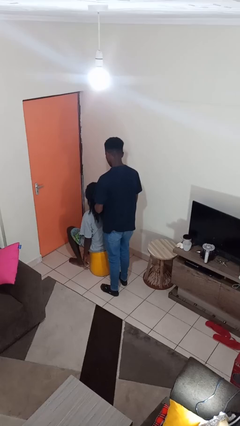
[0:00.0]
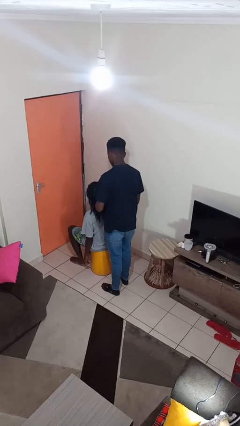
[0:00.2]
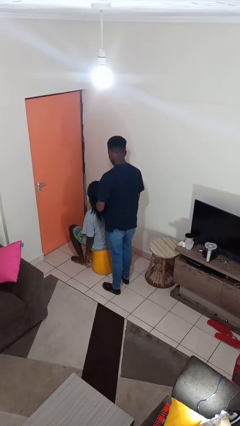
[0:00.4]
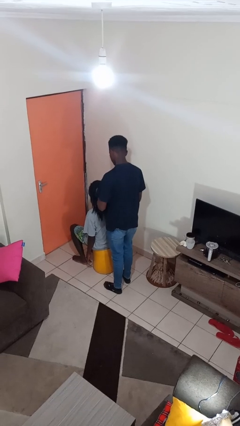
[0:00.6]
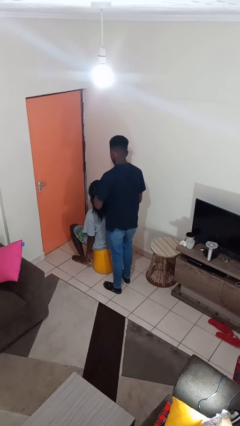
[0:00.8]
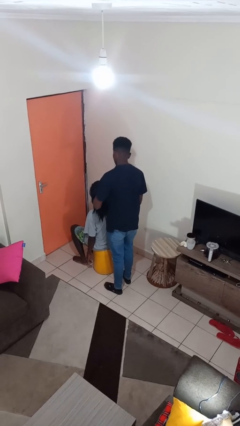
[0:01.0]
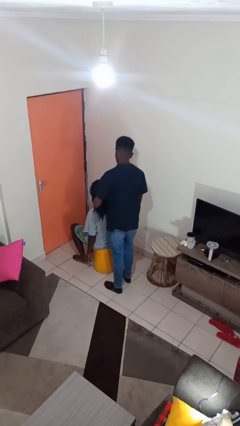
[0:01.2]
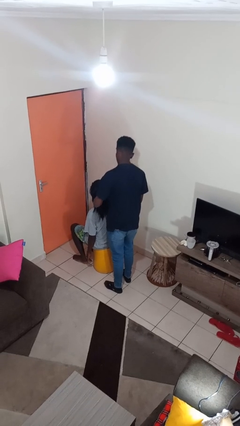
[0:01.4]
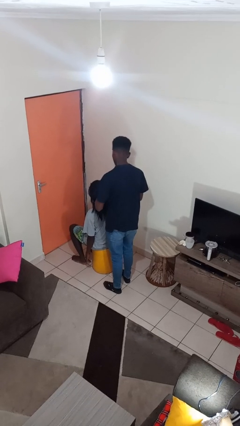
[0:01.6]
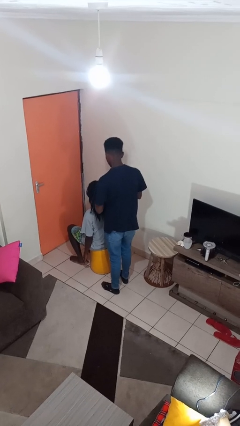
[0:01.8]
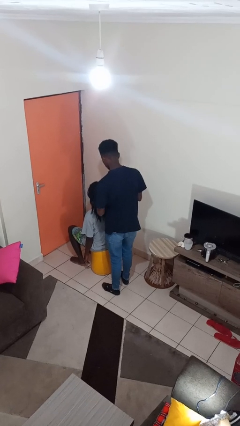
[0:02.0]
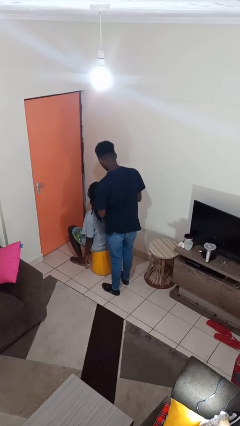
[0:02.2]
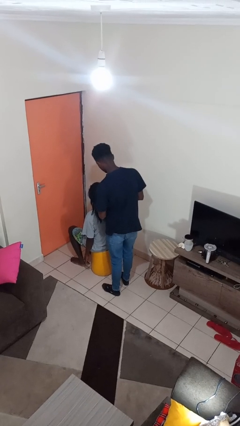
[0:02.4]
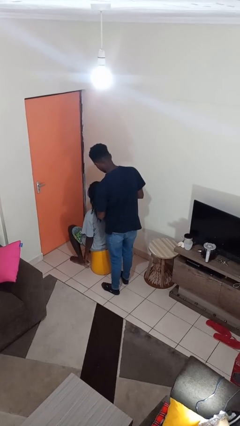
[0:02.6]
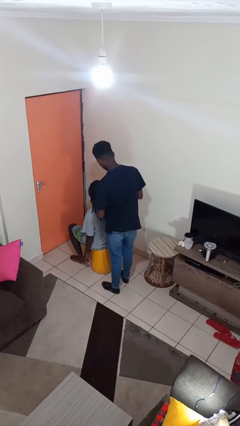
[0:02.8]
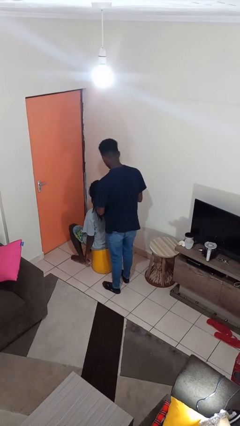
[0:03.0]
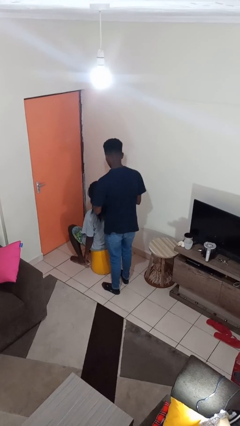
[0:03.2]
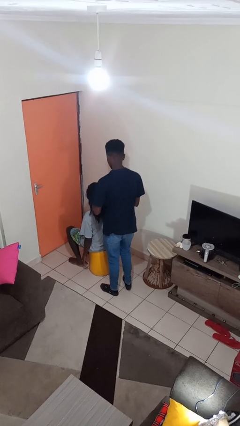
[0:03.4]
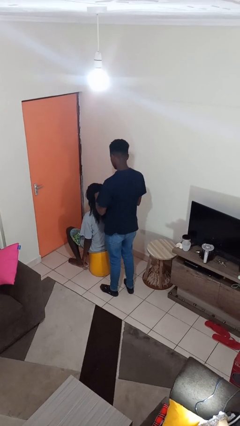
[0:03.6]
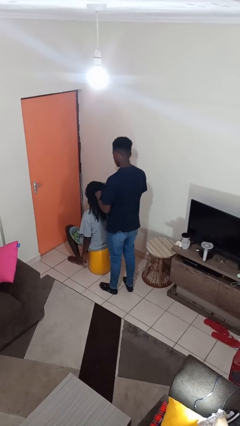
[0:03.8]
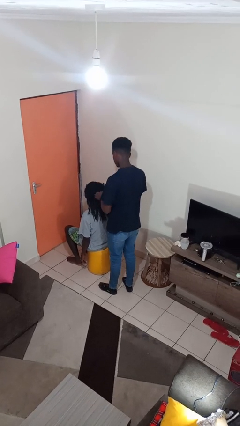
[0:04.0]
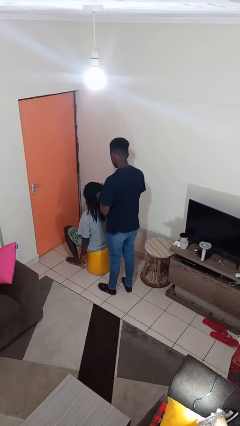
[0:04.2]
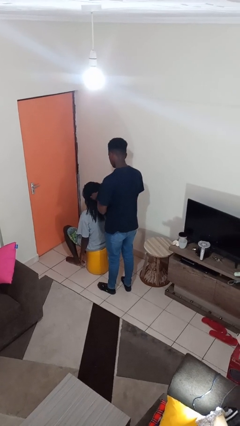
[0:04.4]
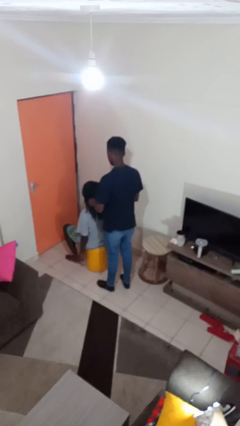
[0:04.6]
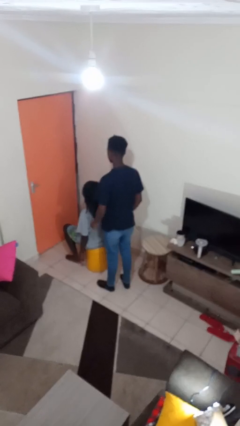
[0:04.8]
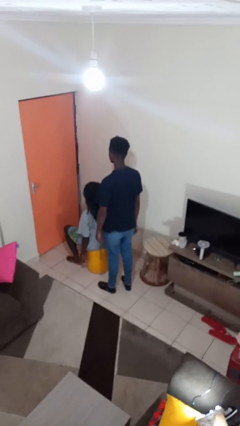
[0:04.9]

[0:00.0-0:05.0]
person braids hair of person

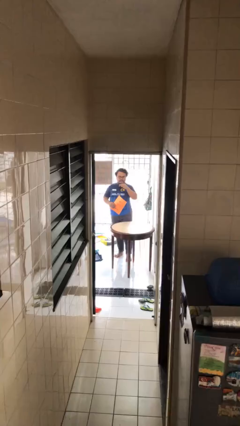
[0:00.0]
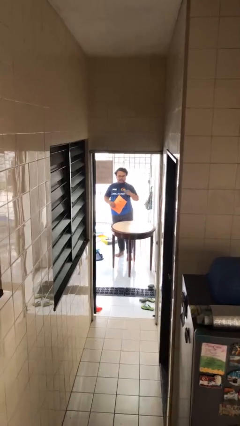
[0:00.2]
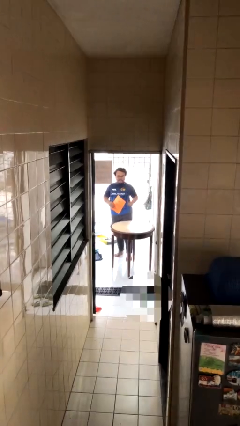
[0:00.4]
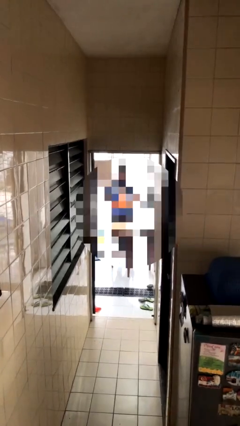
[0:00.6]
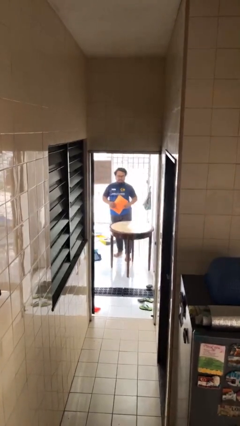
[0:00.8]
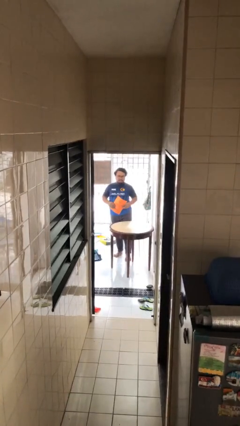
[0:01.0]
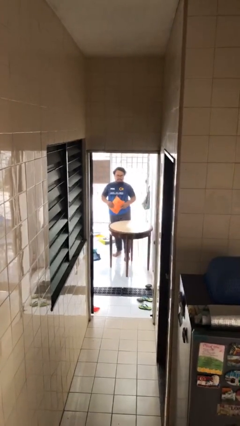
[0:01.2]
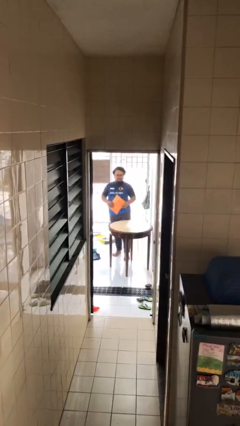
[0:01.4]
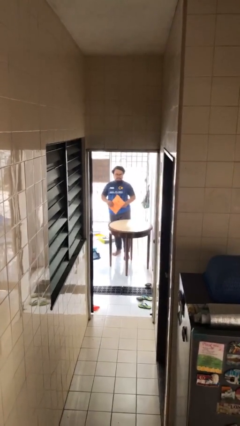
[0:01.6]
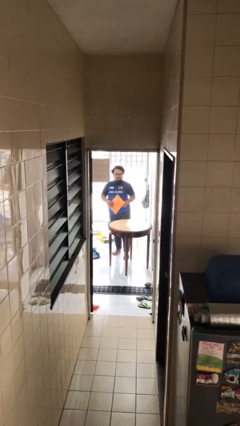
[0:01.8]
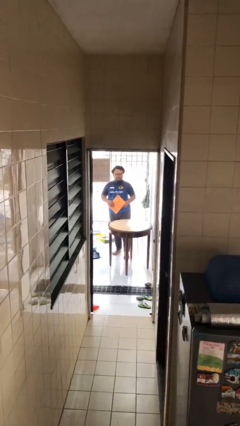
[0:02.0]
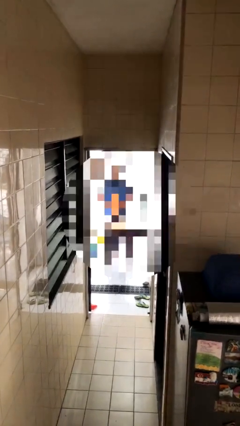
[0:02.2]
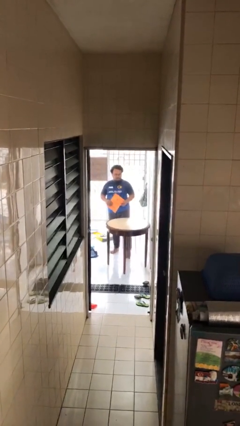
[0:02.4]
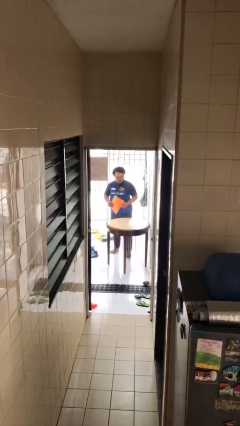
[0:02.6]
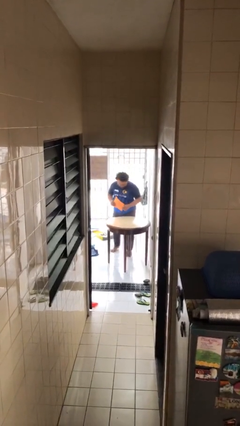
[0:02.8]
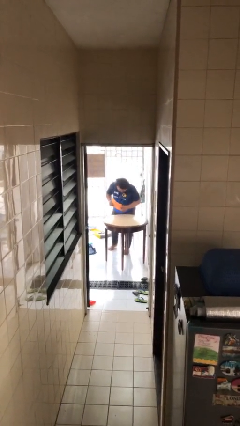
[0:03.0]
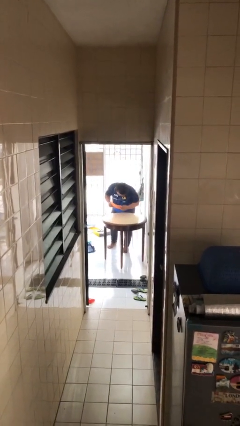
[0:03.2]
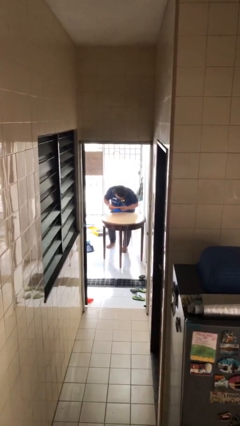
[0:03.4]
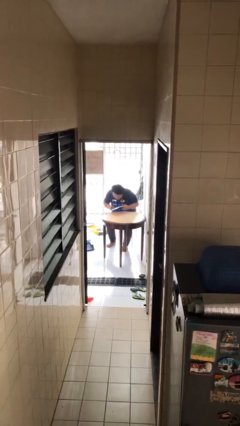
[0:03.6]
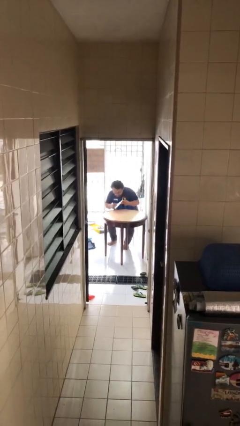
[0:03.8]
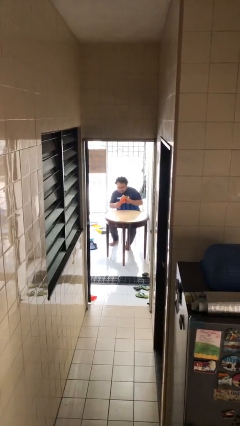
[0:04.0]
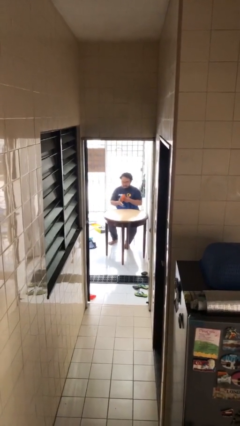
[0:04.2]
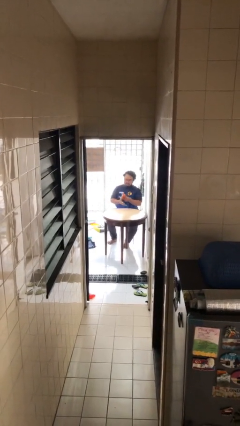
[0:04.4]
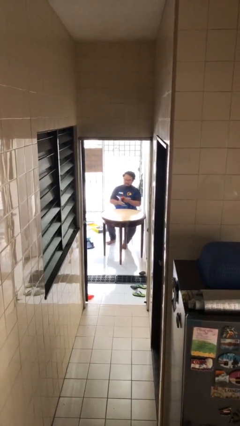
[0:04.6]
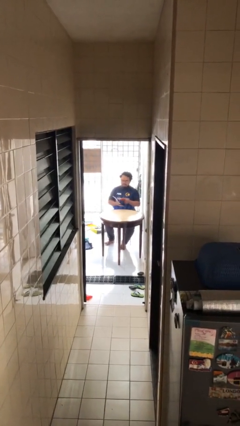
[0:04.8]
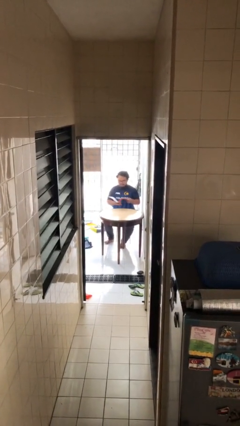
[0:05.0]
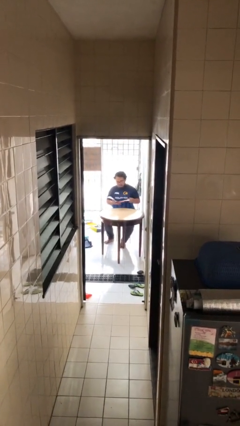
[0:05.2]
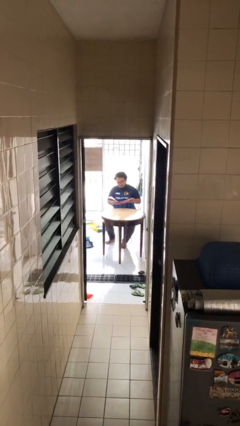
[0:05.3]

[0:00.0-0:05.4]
person sits down

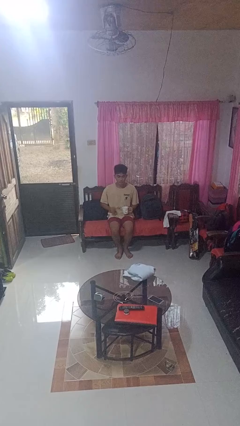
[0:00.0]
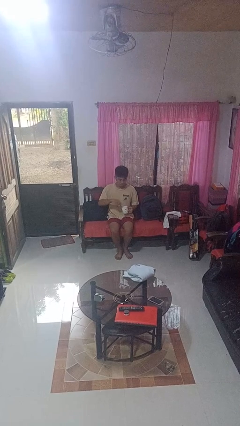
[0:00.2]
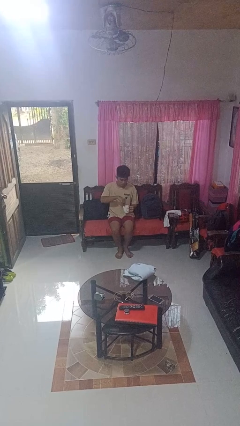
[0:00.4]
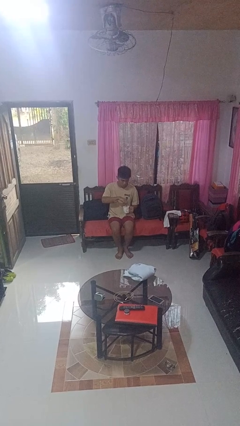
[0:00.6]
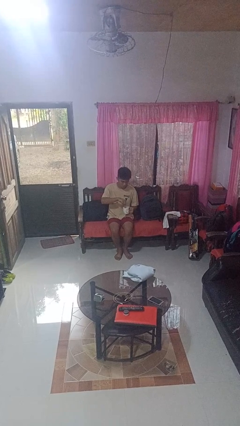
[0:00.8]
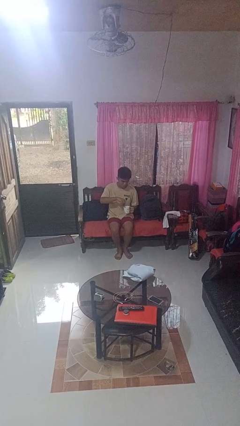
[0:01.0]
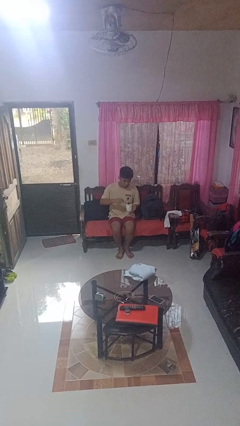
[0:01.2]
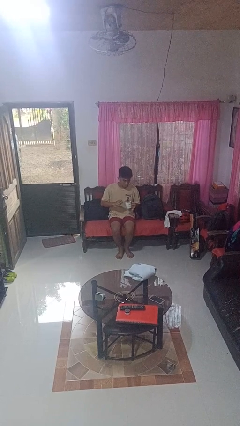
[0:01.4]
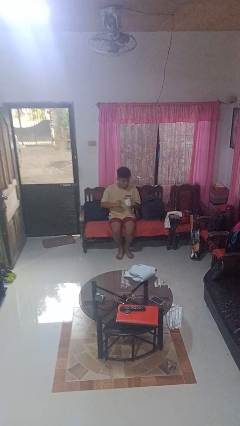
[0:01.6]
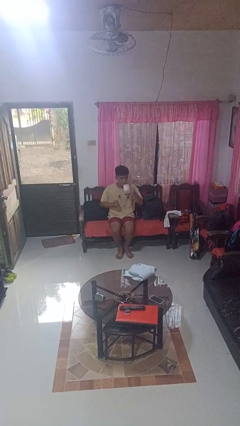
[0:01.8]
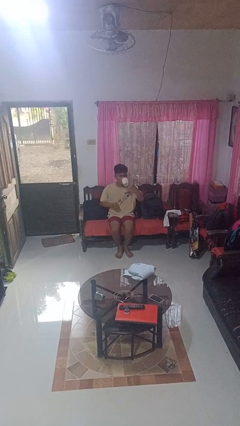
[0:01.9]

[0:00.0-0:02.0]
person stirs mug

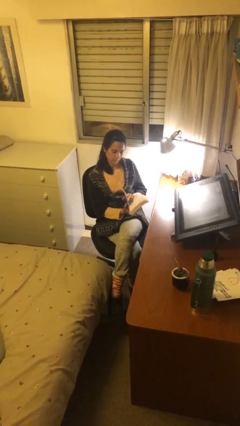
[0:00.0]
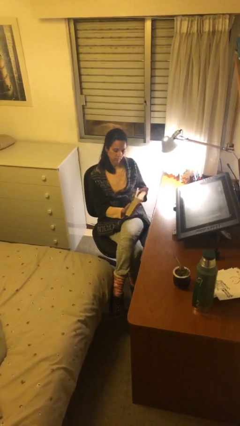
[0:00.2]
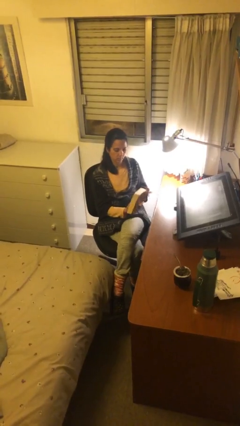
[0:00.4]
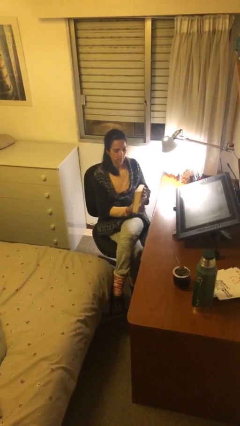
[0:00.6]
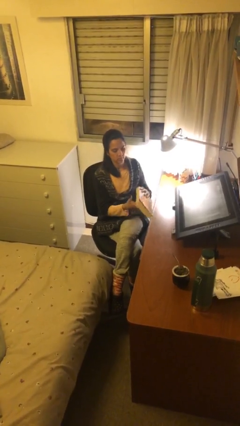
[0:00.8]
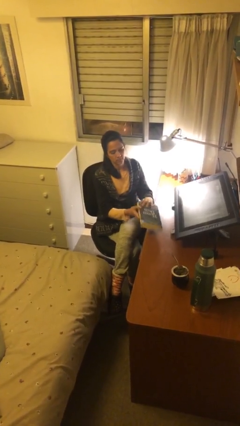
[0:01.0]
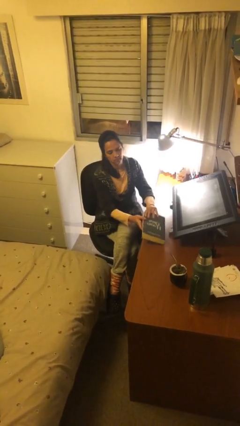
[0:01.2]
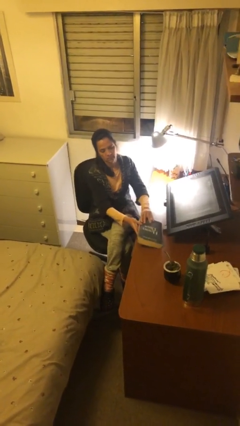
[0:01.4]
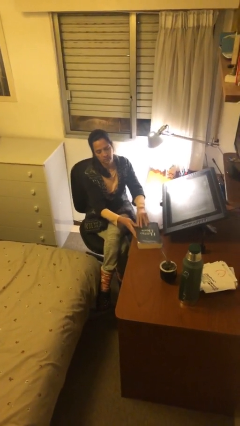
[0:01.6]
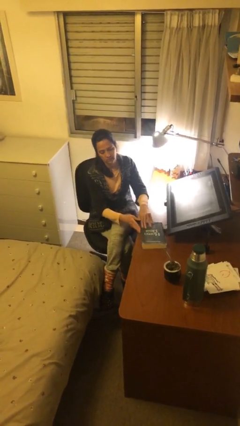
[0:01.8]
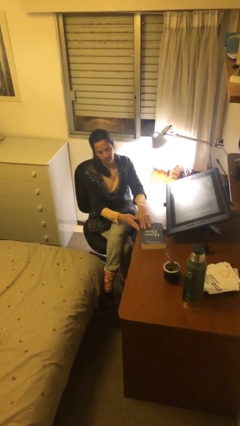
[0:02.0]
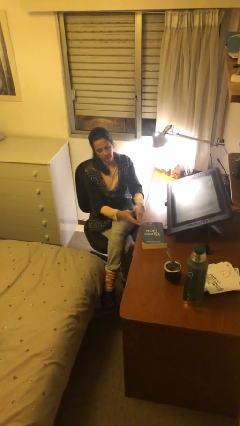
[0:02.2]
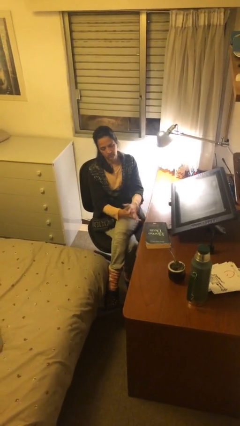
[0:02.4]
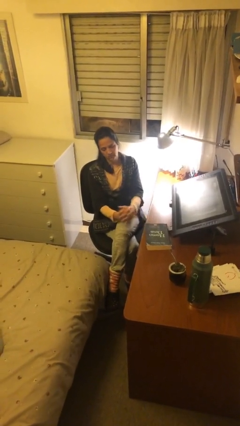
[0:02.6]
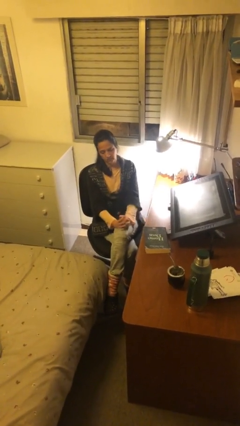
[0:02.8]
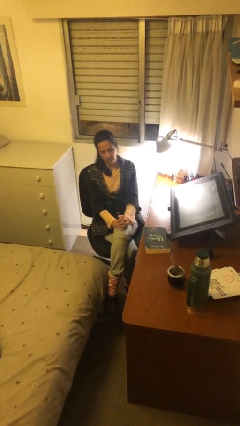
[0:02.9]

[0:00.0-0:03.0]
person puts down object on table

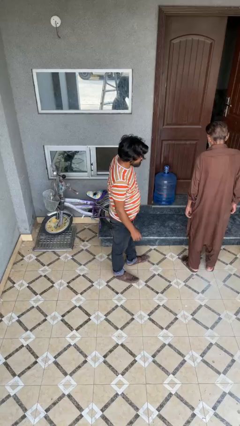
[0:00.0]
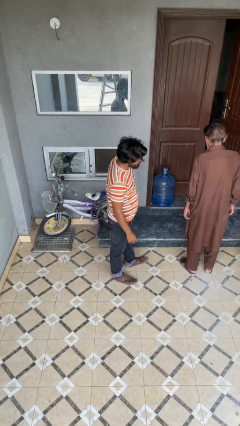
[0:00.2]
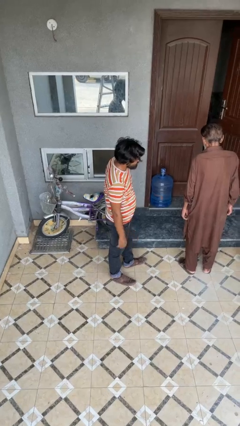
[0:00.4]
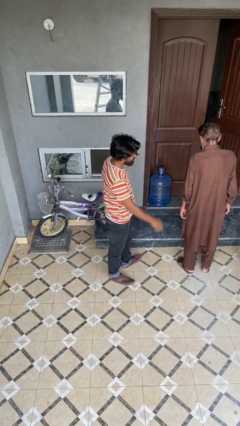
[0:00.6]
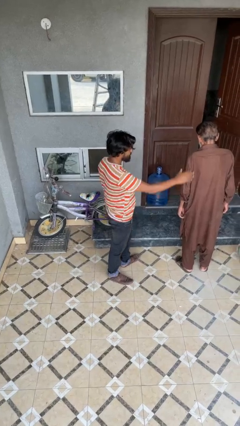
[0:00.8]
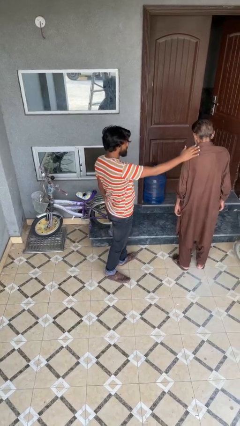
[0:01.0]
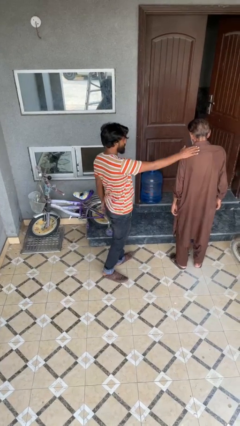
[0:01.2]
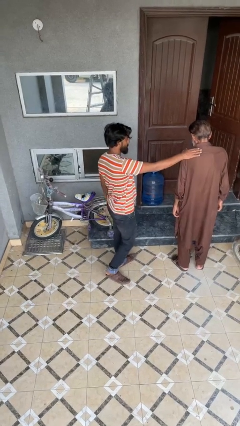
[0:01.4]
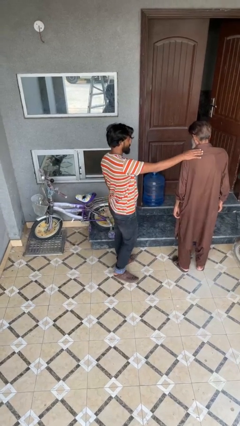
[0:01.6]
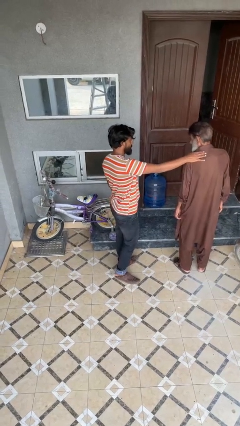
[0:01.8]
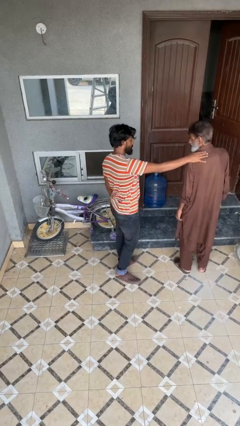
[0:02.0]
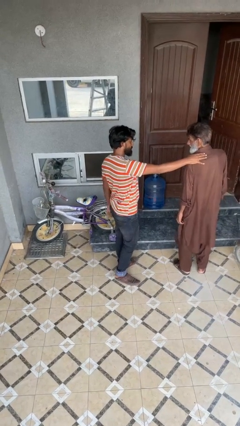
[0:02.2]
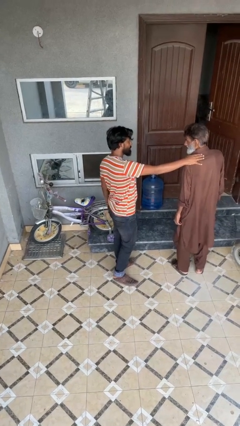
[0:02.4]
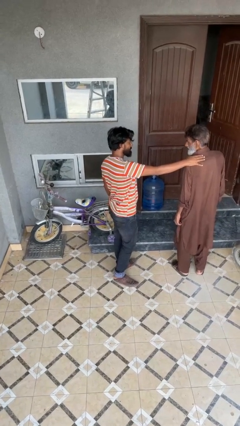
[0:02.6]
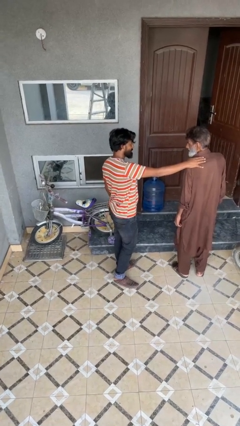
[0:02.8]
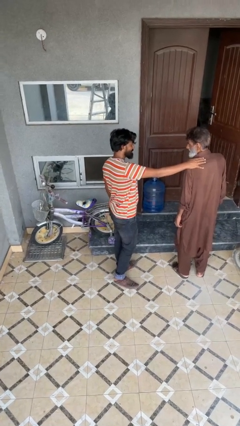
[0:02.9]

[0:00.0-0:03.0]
person touches back of person
